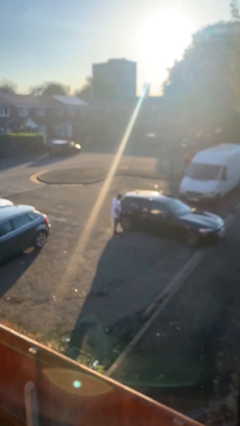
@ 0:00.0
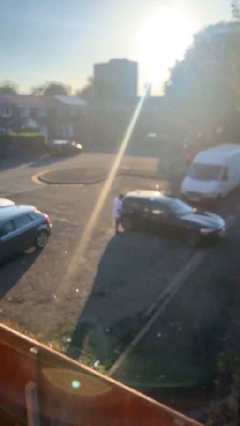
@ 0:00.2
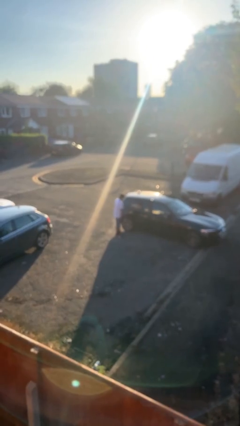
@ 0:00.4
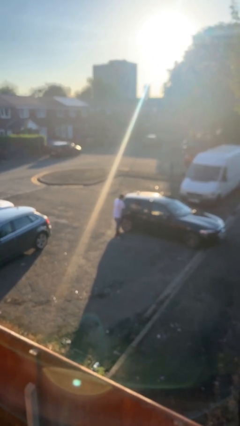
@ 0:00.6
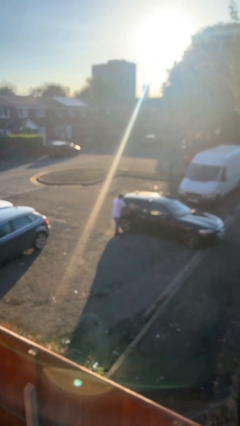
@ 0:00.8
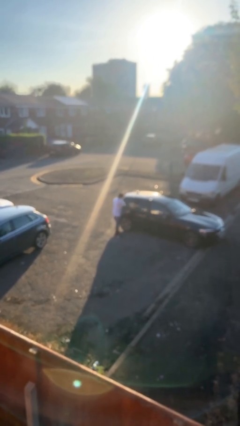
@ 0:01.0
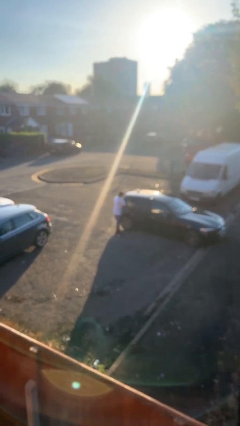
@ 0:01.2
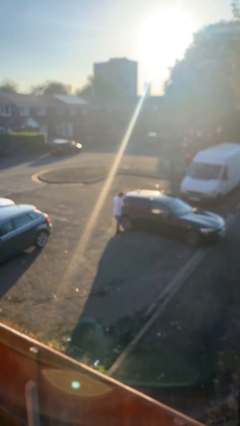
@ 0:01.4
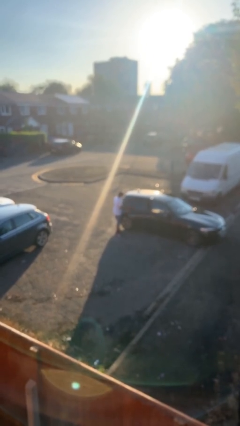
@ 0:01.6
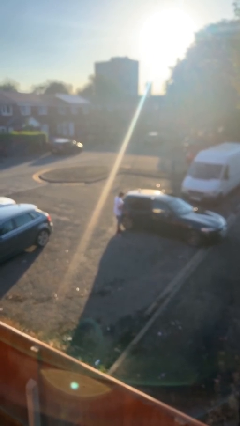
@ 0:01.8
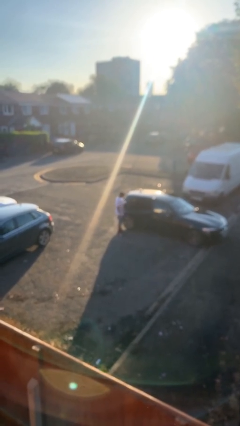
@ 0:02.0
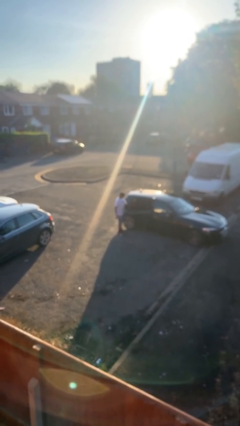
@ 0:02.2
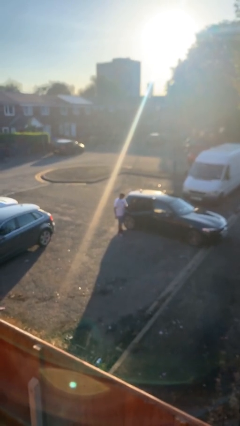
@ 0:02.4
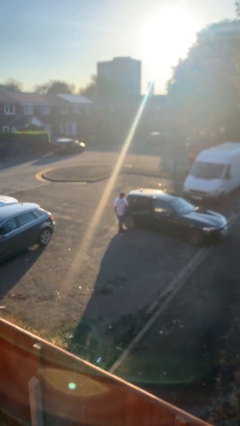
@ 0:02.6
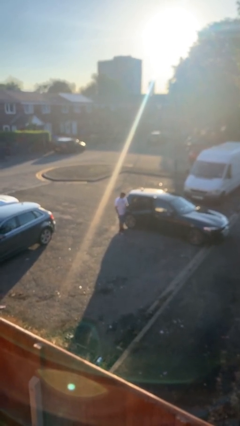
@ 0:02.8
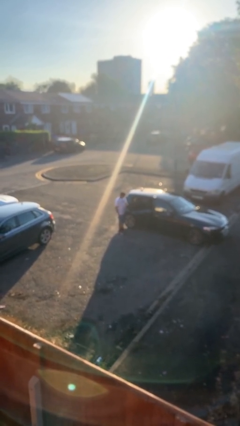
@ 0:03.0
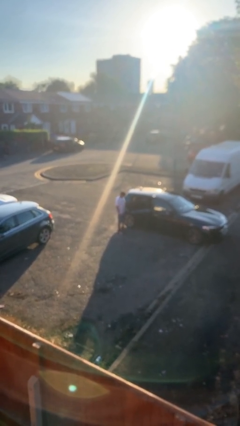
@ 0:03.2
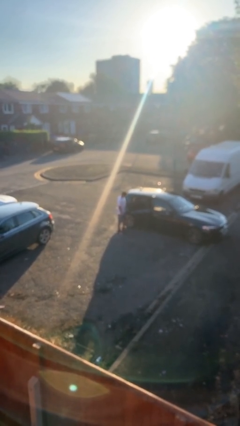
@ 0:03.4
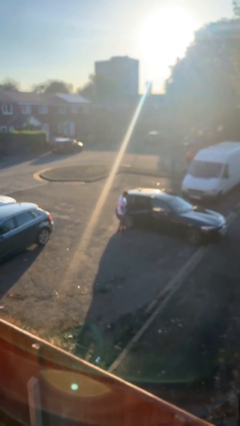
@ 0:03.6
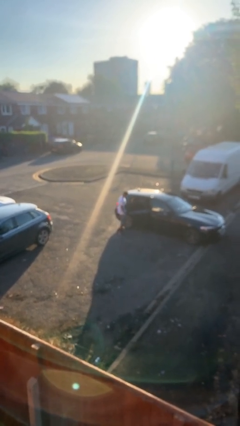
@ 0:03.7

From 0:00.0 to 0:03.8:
person opens car door

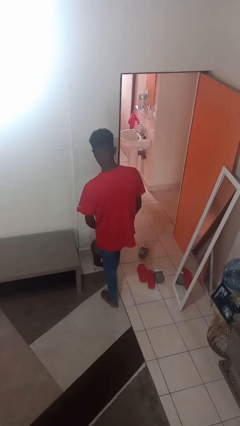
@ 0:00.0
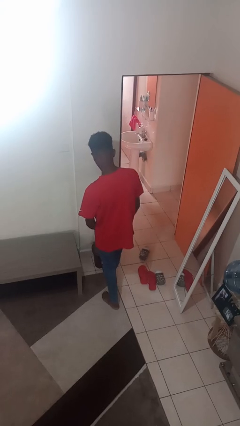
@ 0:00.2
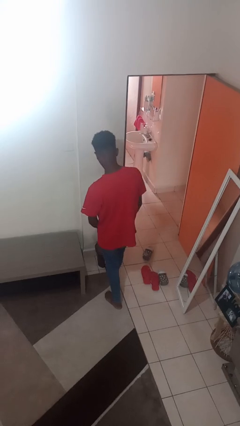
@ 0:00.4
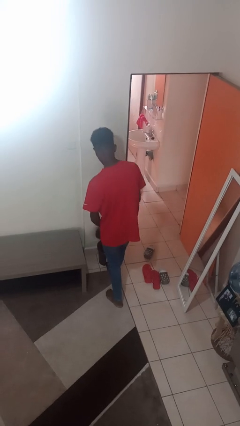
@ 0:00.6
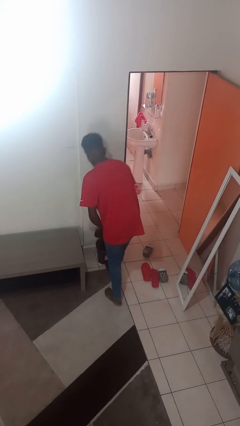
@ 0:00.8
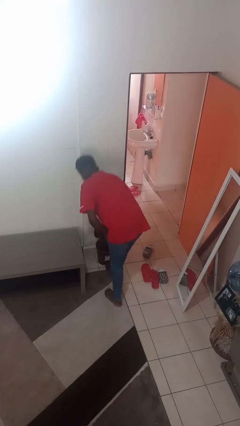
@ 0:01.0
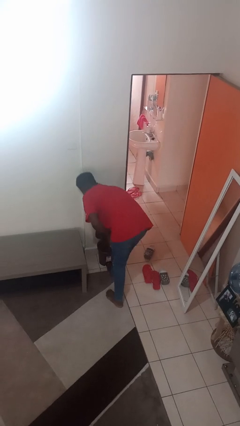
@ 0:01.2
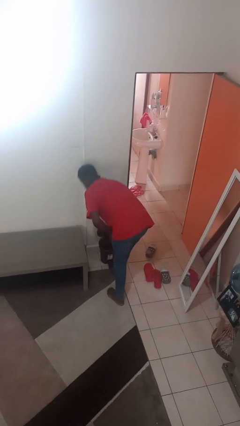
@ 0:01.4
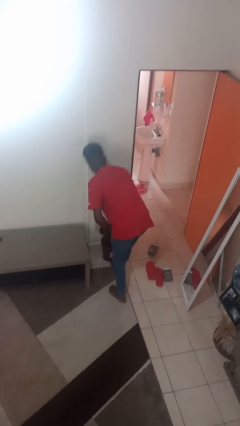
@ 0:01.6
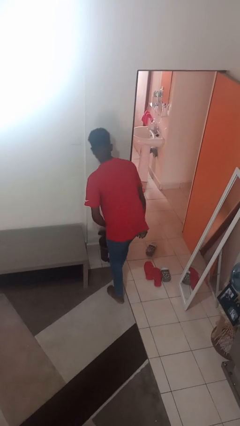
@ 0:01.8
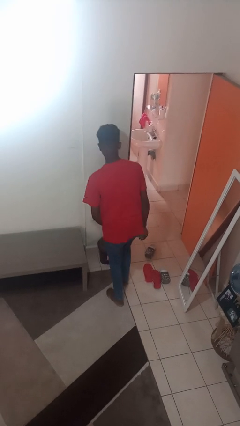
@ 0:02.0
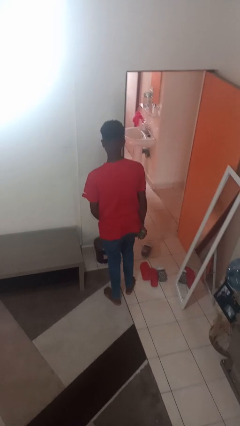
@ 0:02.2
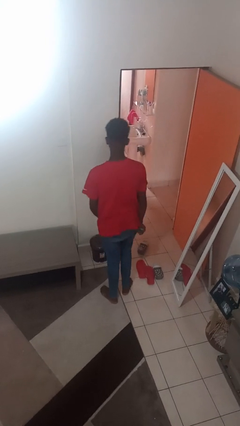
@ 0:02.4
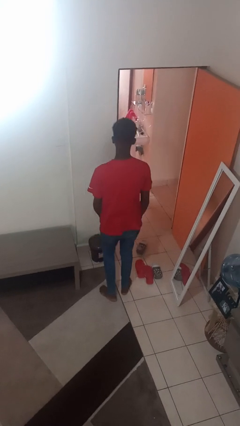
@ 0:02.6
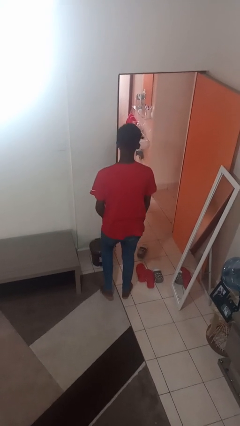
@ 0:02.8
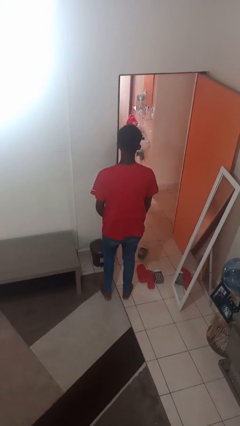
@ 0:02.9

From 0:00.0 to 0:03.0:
person discards trash

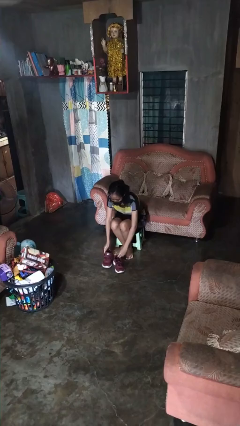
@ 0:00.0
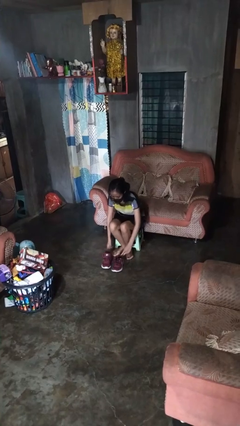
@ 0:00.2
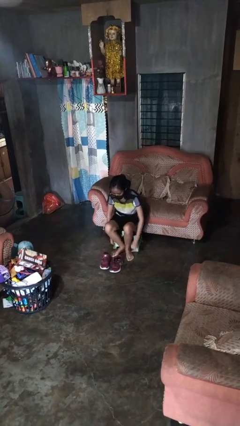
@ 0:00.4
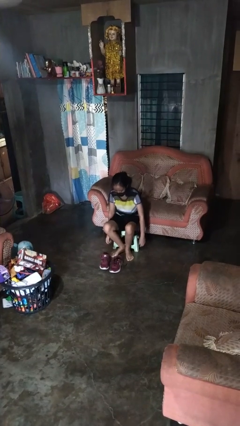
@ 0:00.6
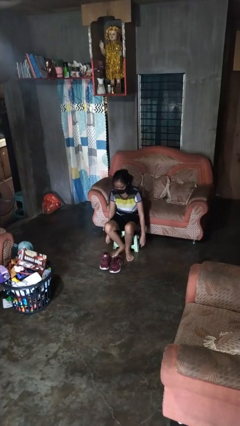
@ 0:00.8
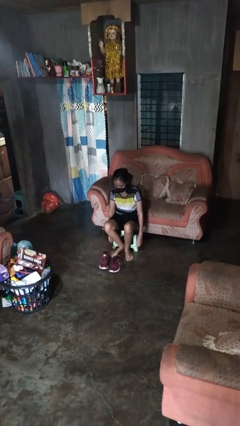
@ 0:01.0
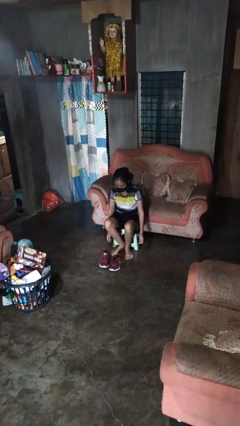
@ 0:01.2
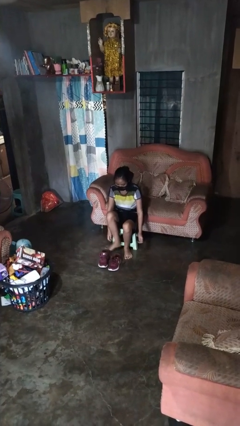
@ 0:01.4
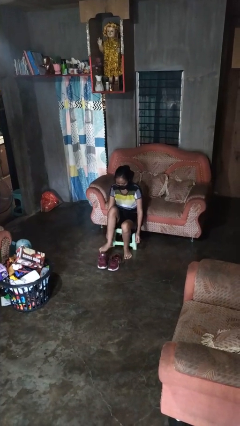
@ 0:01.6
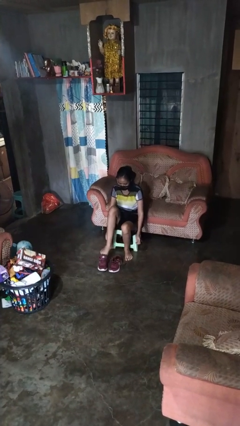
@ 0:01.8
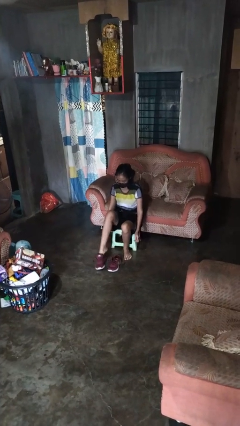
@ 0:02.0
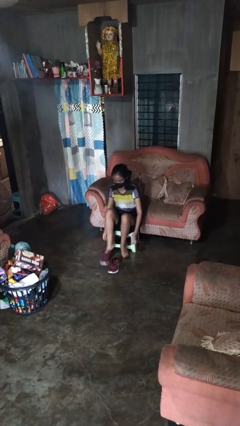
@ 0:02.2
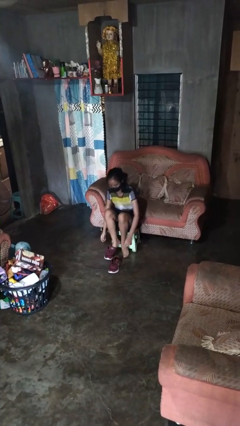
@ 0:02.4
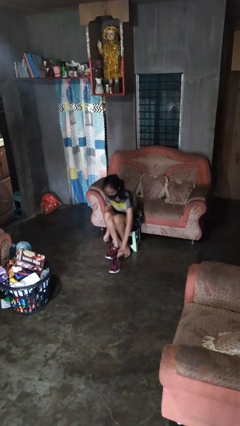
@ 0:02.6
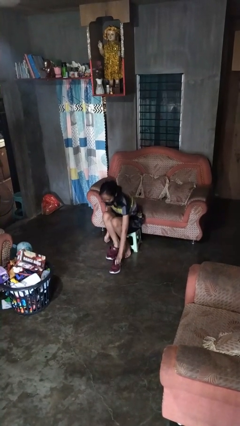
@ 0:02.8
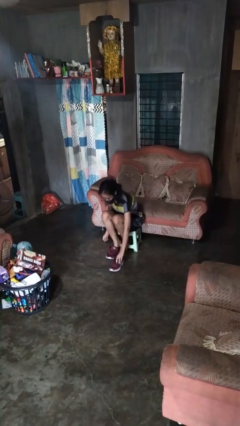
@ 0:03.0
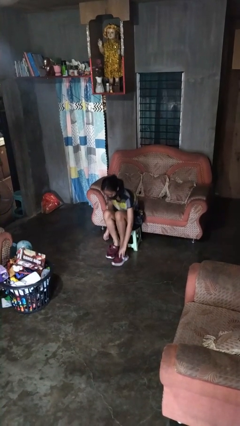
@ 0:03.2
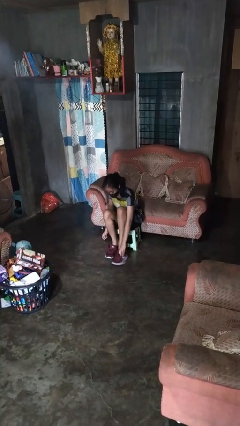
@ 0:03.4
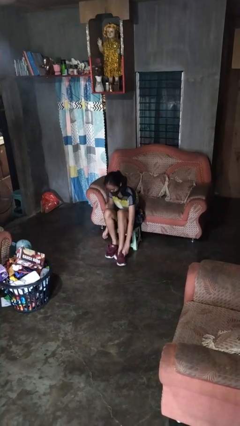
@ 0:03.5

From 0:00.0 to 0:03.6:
person puts on shoes

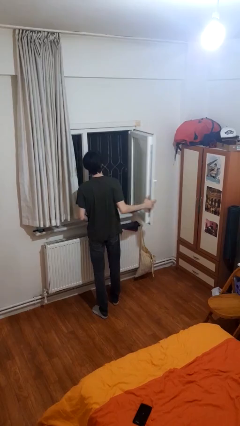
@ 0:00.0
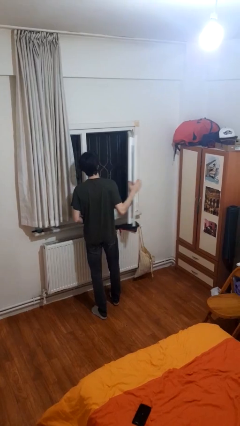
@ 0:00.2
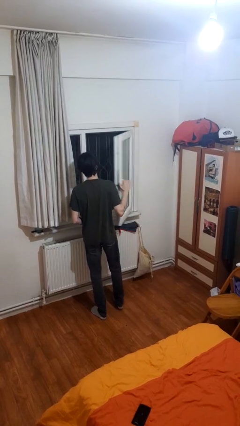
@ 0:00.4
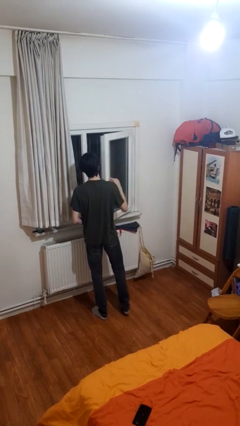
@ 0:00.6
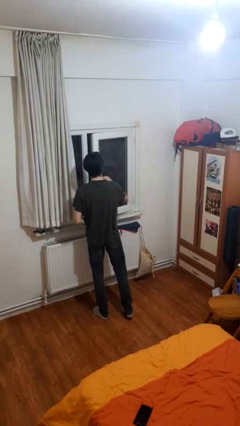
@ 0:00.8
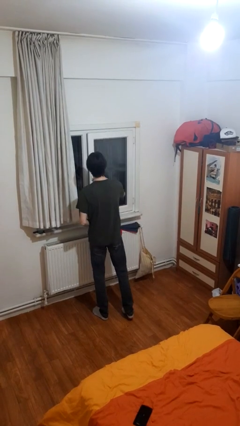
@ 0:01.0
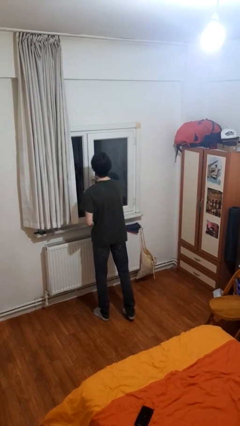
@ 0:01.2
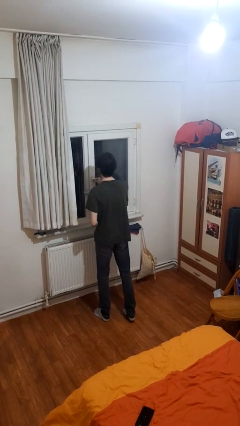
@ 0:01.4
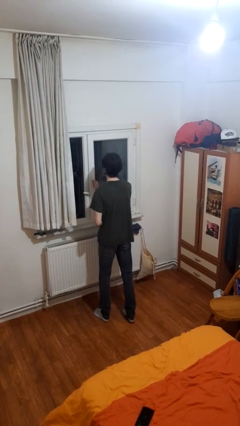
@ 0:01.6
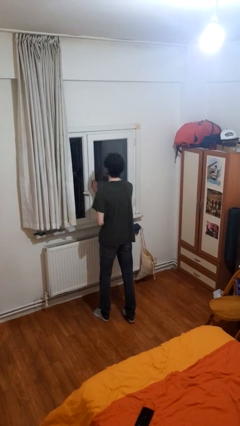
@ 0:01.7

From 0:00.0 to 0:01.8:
person closes home window

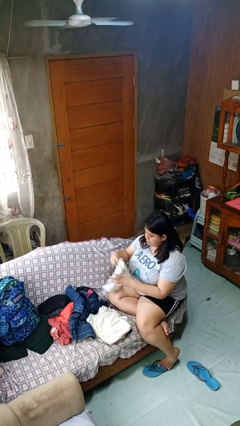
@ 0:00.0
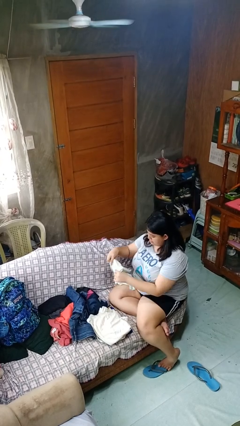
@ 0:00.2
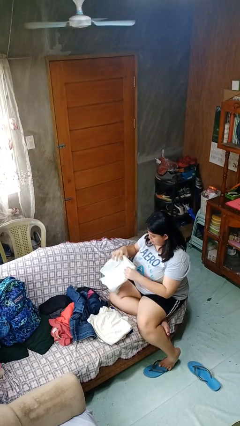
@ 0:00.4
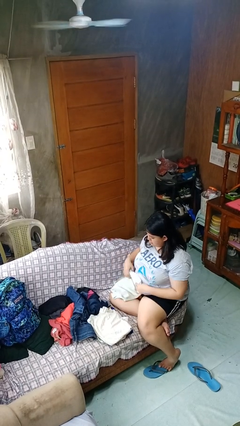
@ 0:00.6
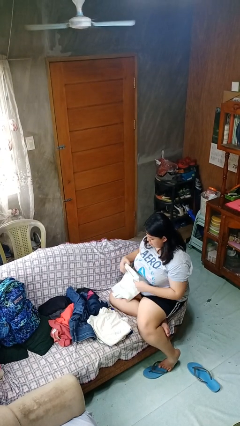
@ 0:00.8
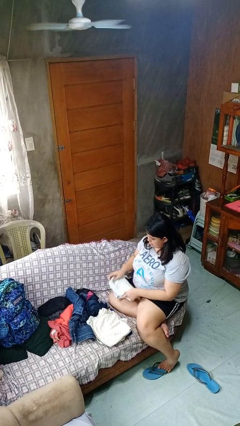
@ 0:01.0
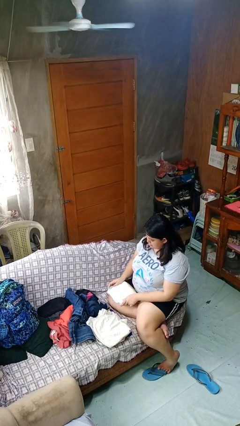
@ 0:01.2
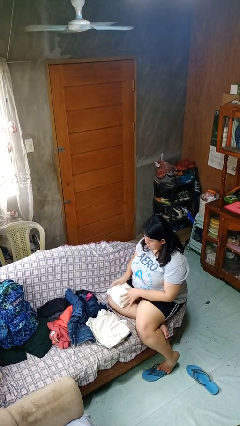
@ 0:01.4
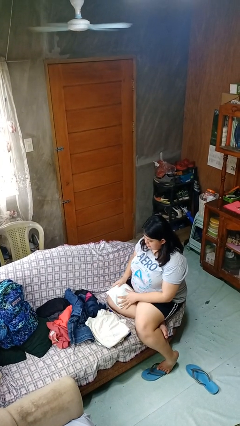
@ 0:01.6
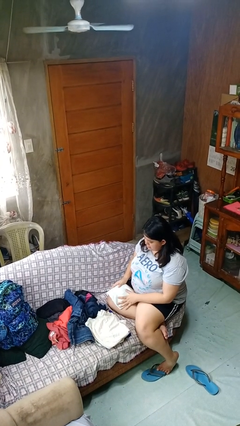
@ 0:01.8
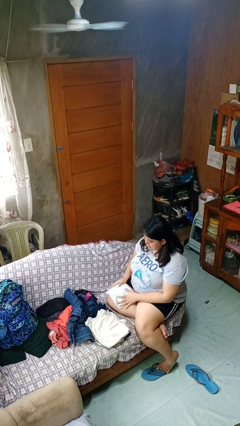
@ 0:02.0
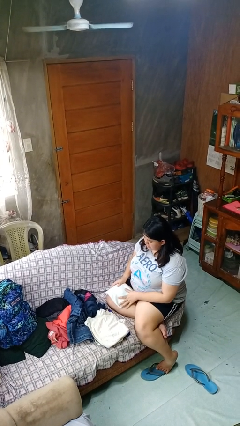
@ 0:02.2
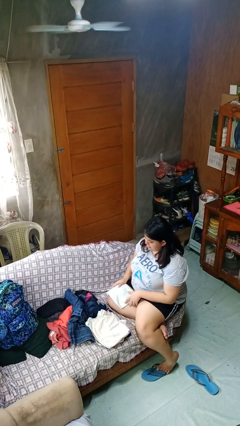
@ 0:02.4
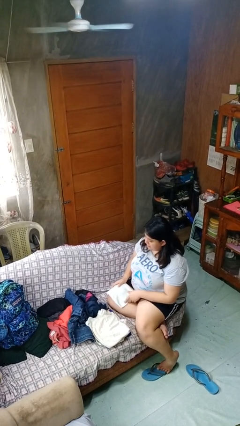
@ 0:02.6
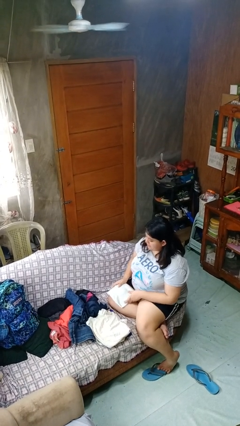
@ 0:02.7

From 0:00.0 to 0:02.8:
person folds shirt

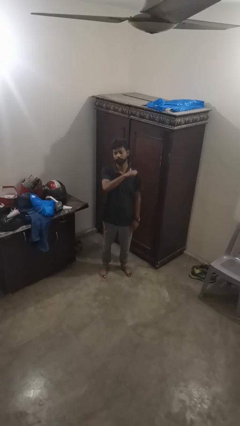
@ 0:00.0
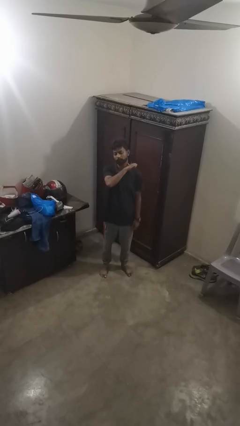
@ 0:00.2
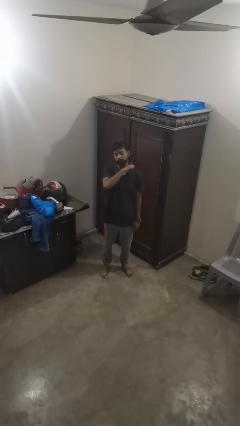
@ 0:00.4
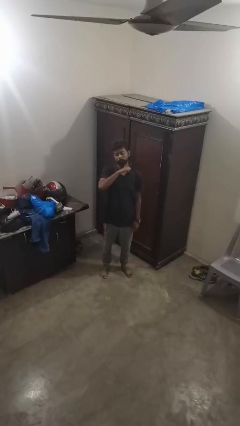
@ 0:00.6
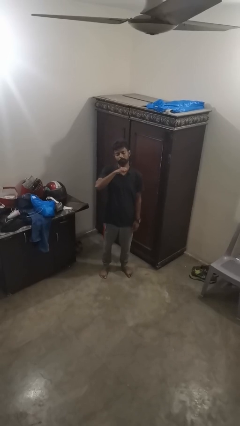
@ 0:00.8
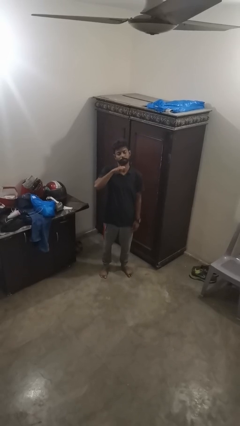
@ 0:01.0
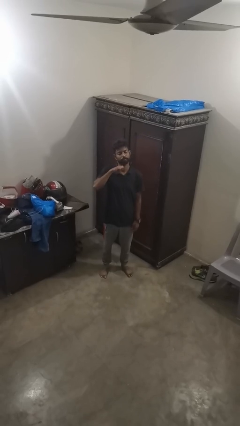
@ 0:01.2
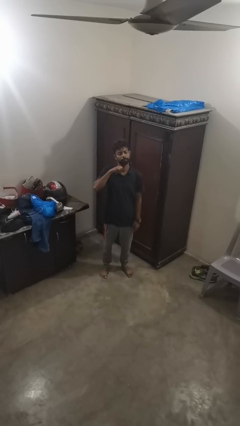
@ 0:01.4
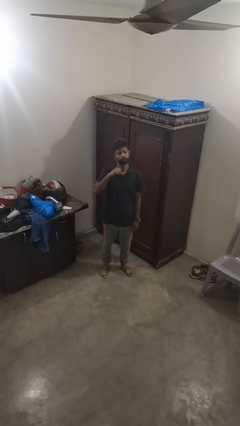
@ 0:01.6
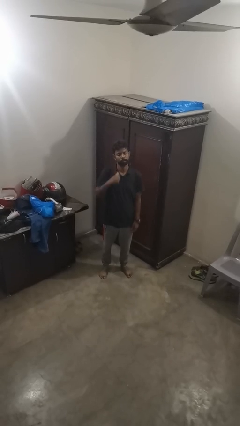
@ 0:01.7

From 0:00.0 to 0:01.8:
person gestures cut
